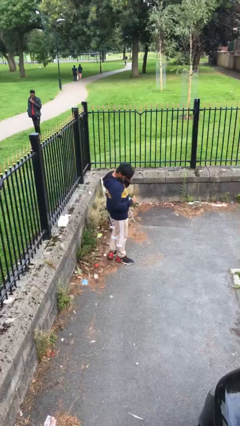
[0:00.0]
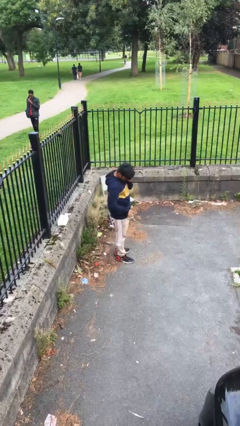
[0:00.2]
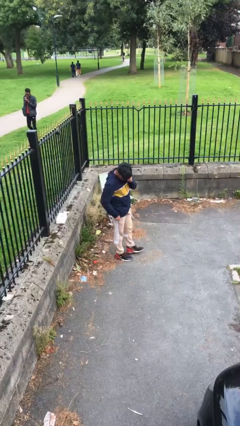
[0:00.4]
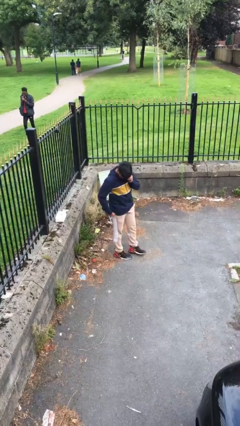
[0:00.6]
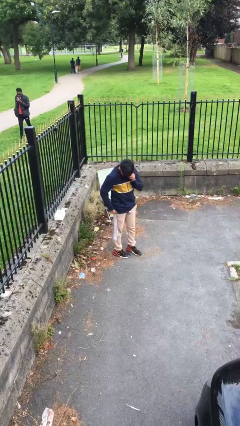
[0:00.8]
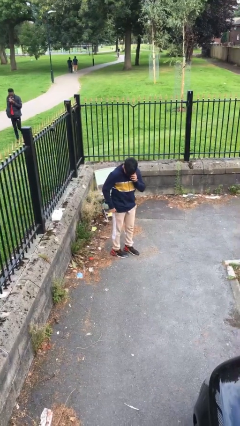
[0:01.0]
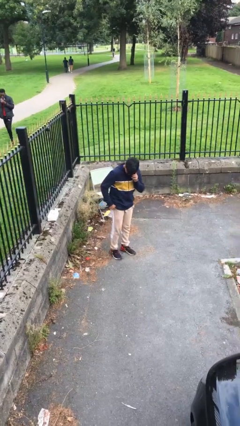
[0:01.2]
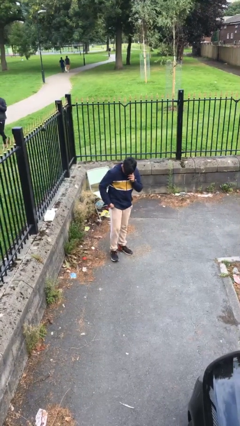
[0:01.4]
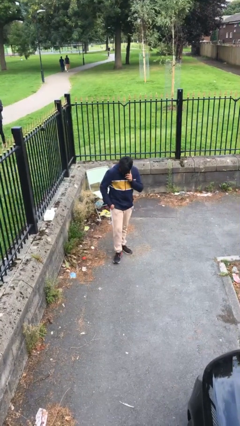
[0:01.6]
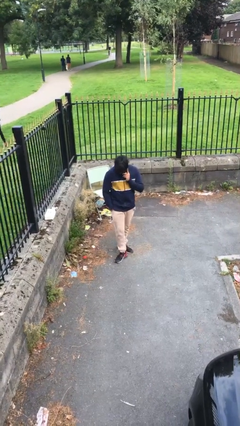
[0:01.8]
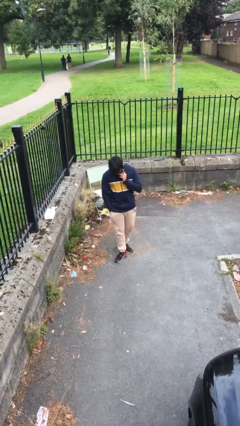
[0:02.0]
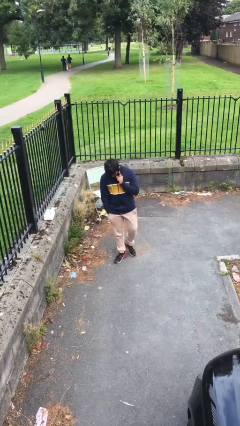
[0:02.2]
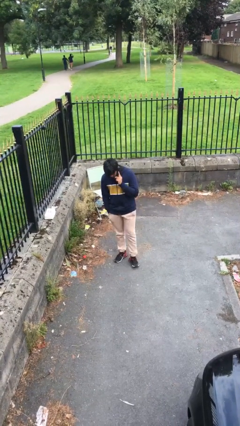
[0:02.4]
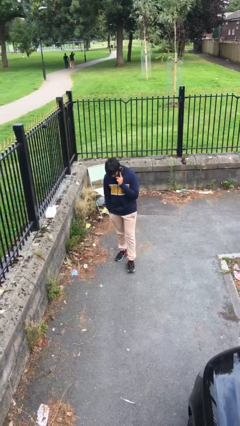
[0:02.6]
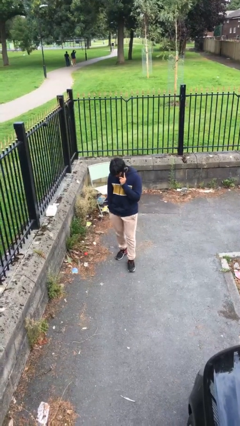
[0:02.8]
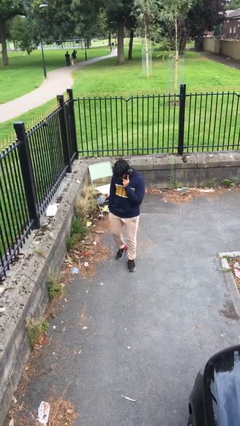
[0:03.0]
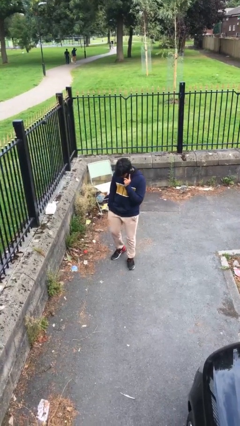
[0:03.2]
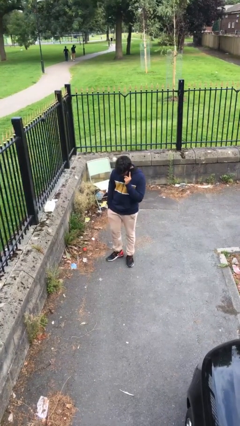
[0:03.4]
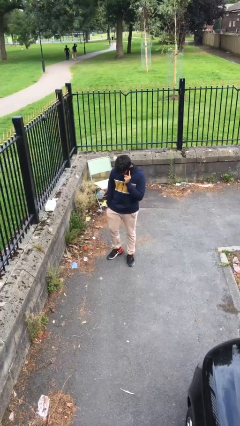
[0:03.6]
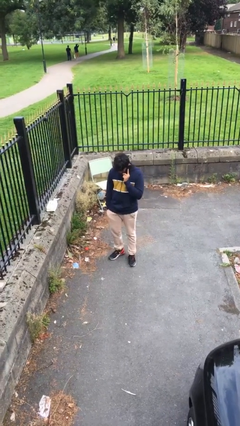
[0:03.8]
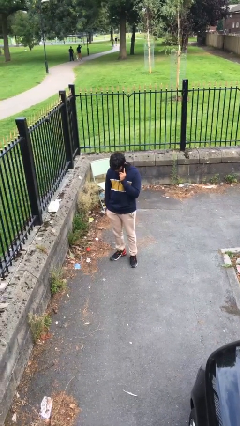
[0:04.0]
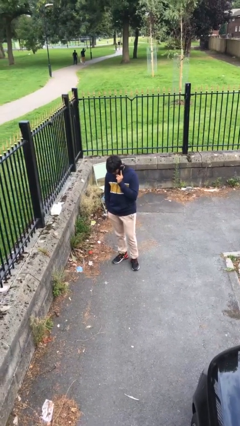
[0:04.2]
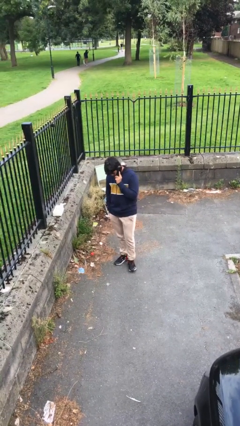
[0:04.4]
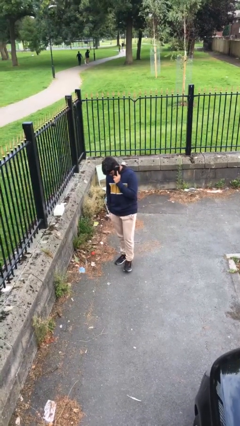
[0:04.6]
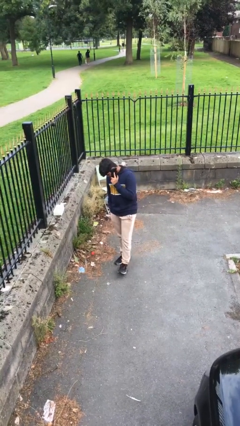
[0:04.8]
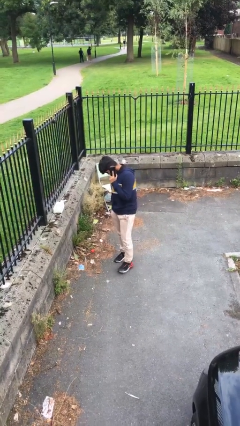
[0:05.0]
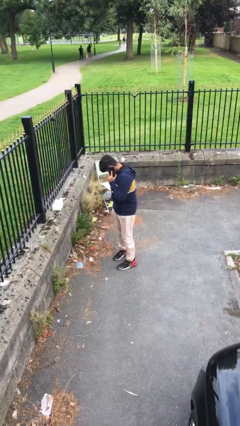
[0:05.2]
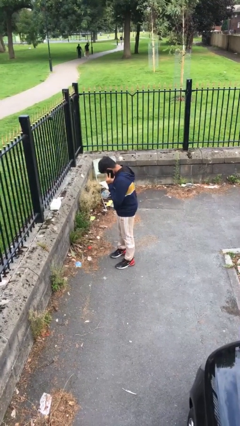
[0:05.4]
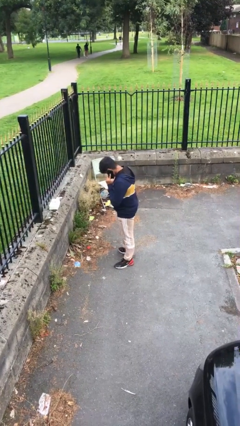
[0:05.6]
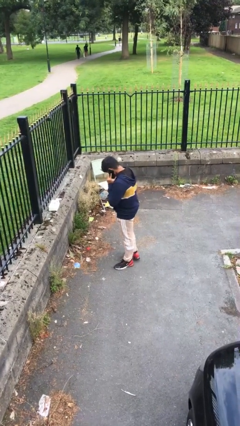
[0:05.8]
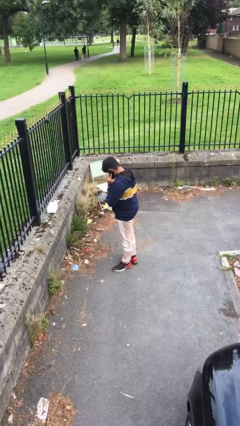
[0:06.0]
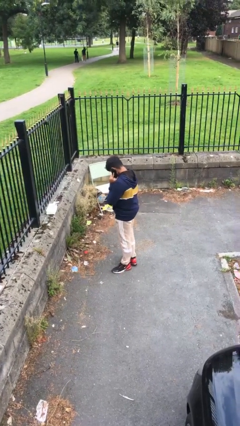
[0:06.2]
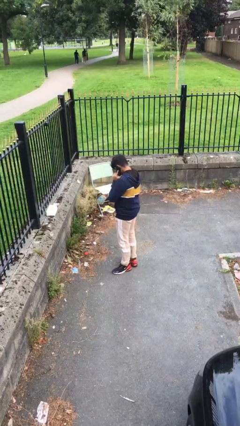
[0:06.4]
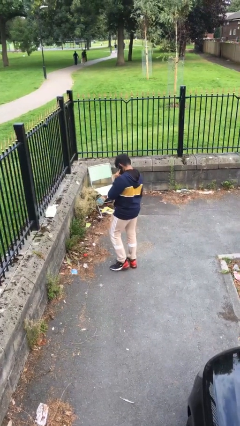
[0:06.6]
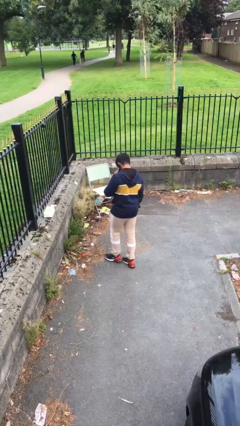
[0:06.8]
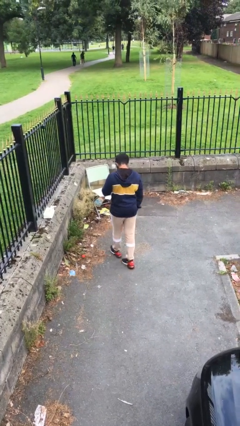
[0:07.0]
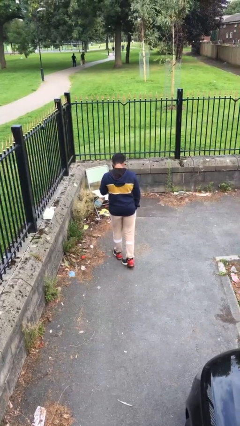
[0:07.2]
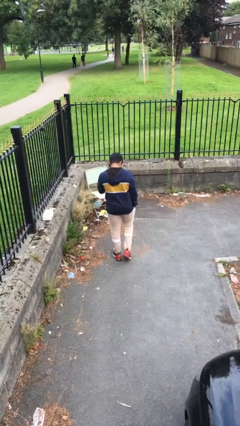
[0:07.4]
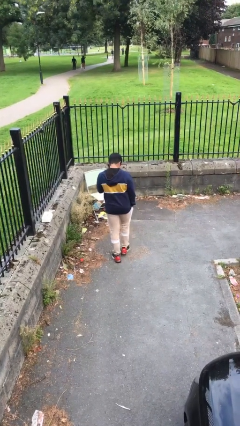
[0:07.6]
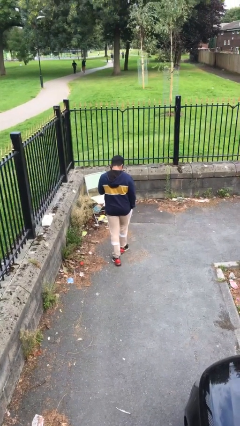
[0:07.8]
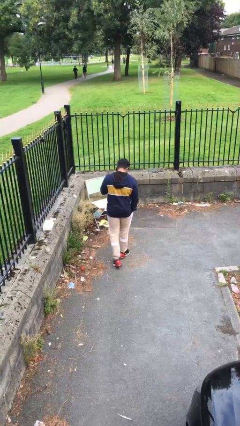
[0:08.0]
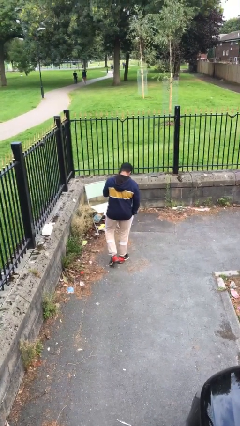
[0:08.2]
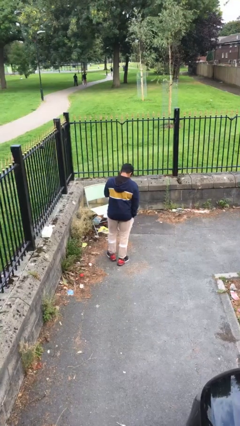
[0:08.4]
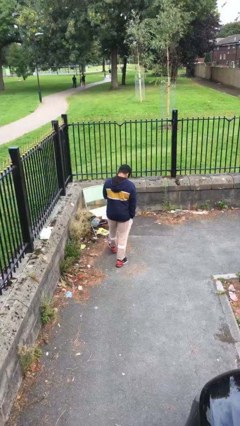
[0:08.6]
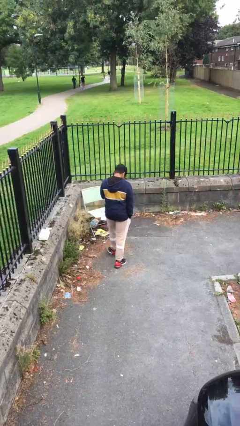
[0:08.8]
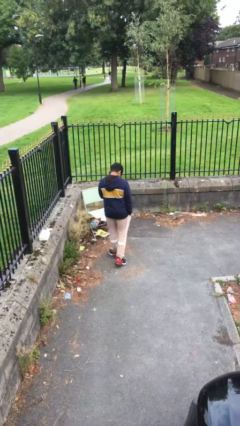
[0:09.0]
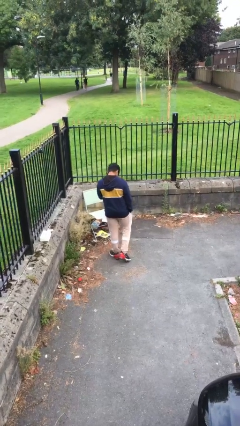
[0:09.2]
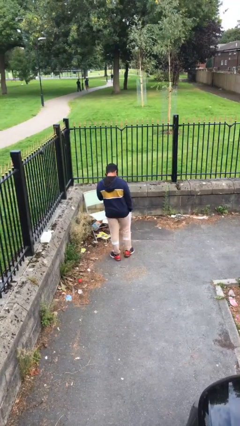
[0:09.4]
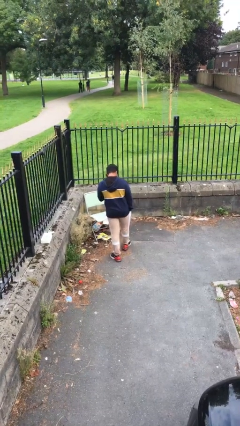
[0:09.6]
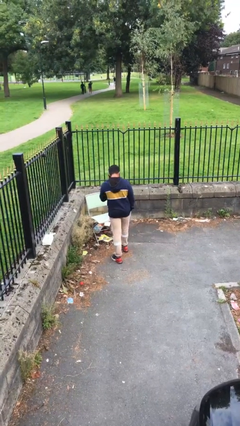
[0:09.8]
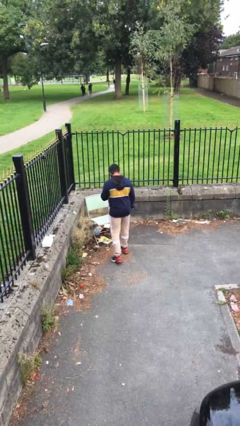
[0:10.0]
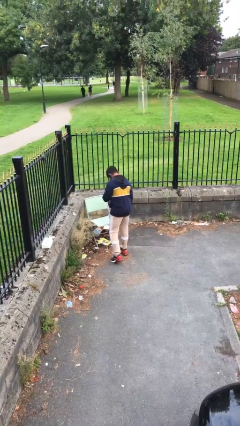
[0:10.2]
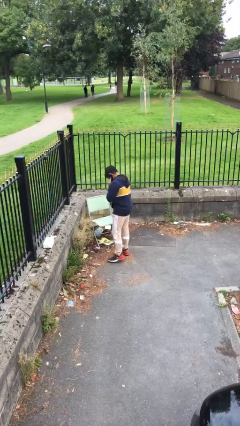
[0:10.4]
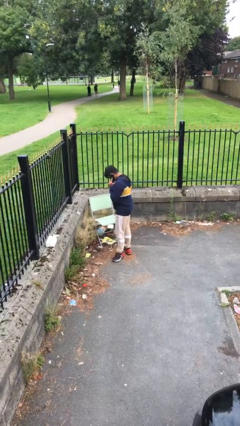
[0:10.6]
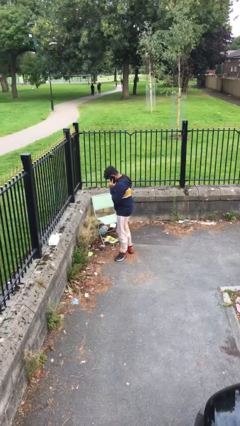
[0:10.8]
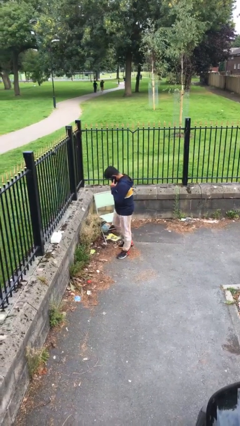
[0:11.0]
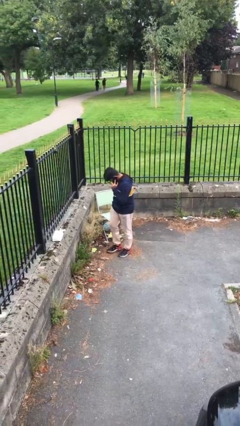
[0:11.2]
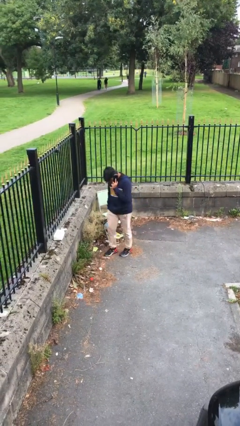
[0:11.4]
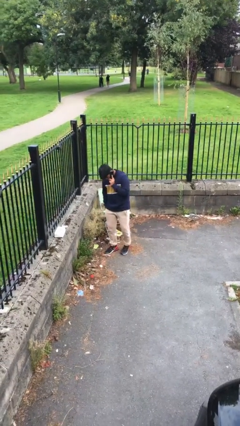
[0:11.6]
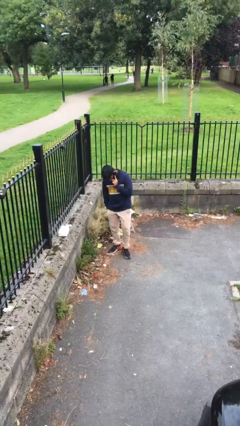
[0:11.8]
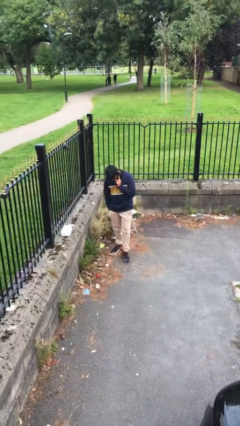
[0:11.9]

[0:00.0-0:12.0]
person talks on phone

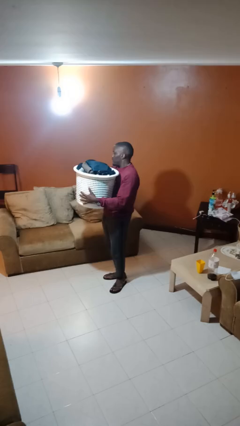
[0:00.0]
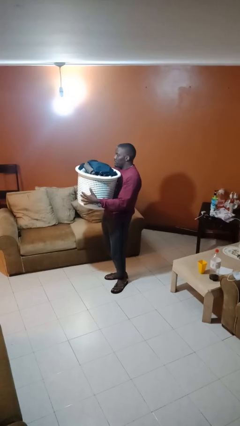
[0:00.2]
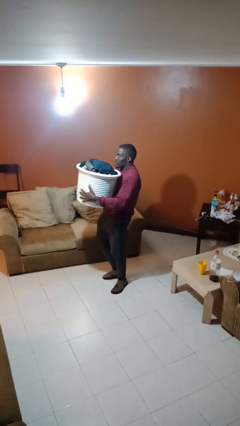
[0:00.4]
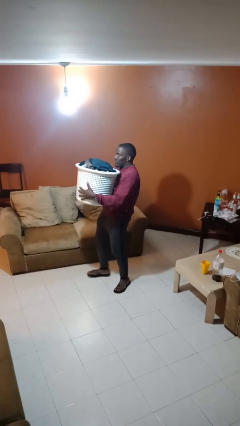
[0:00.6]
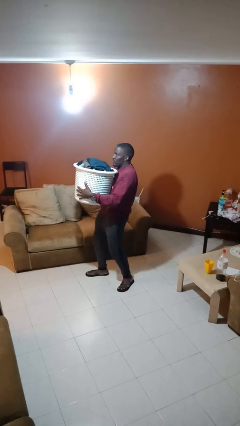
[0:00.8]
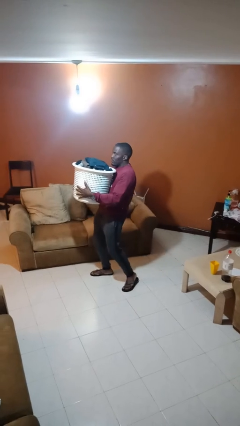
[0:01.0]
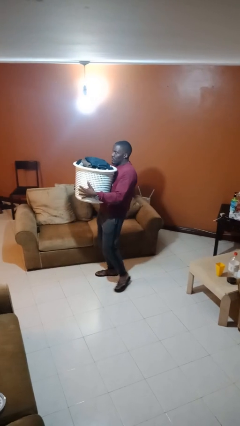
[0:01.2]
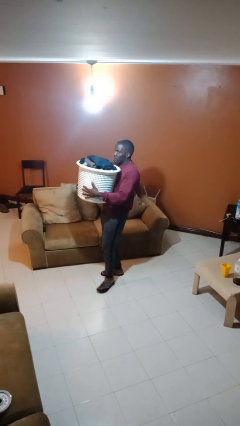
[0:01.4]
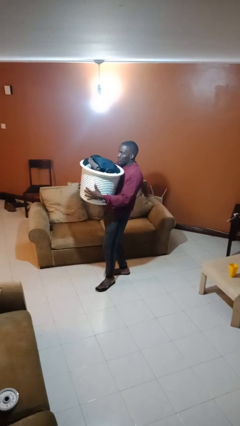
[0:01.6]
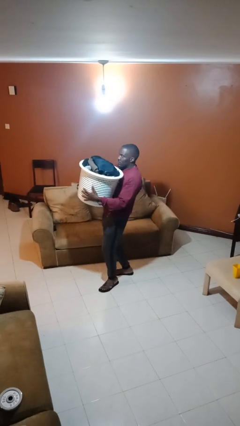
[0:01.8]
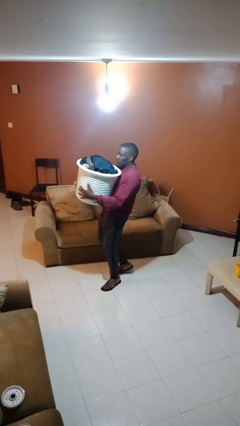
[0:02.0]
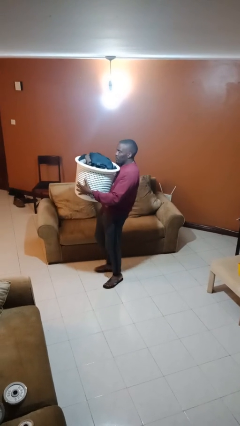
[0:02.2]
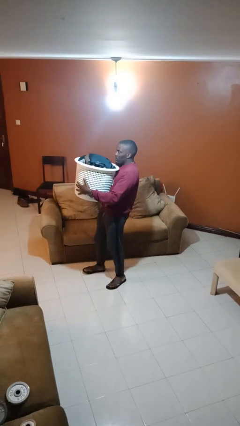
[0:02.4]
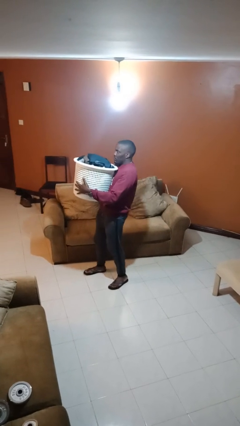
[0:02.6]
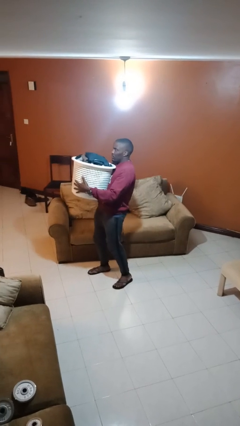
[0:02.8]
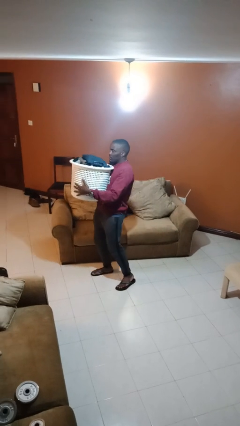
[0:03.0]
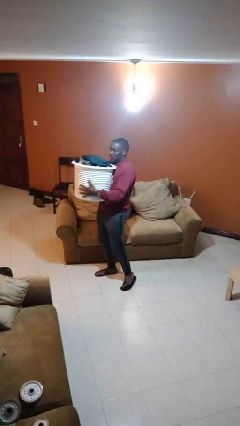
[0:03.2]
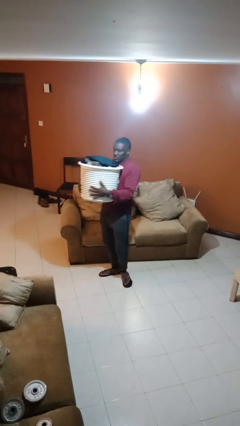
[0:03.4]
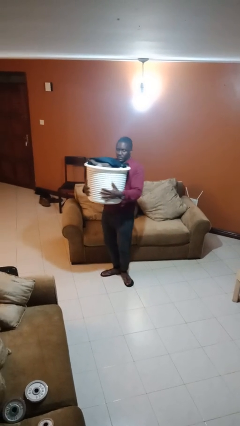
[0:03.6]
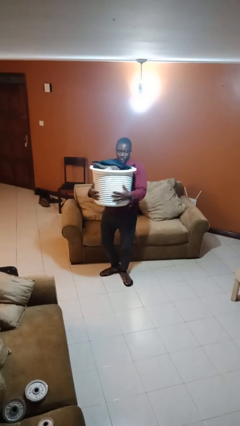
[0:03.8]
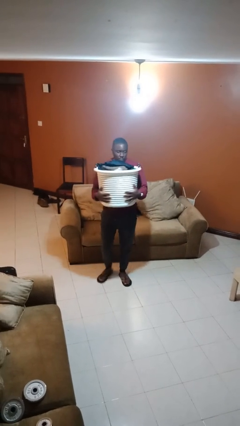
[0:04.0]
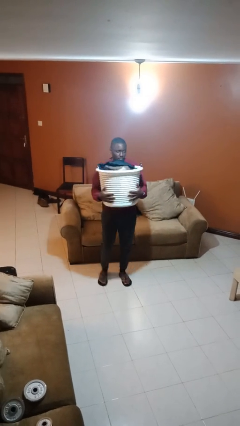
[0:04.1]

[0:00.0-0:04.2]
person carries laundry basket

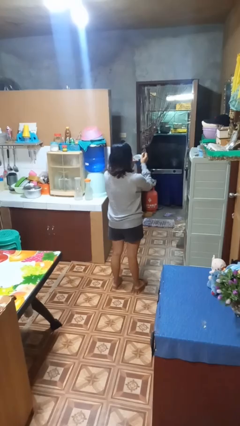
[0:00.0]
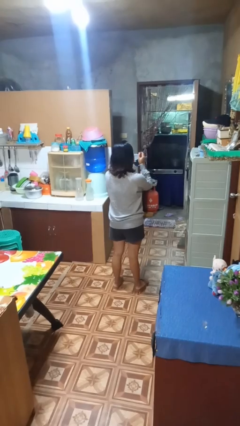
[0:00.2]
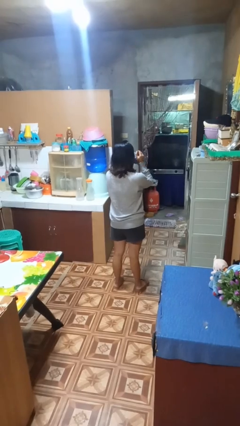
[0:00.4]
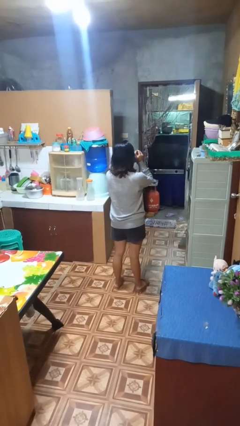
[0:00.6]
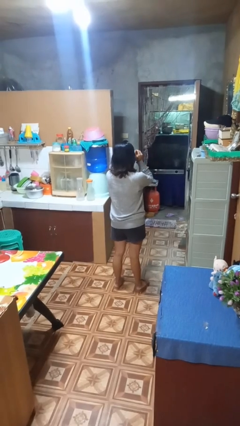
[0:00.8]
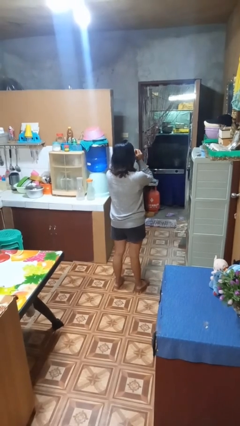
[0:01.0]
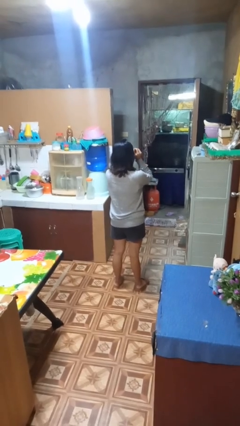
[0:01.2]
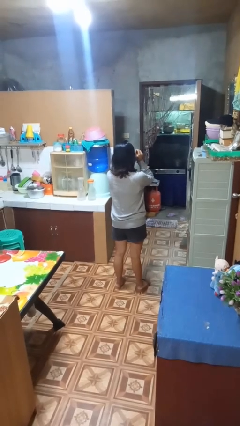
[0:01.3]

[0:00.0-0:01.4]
person drinks from mug

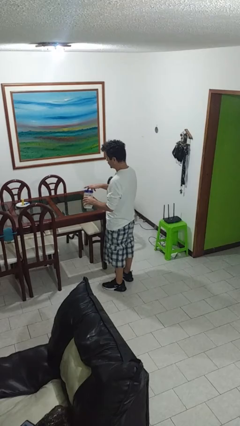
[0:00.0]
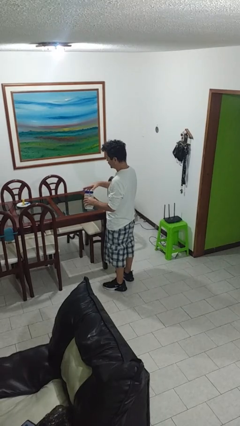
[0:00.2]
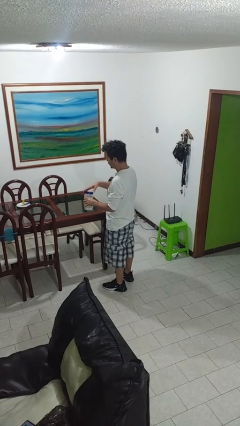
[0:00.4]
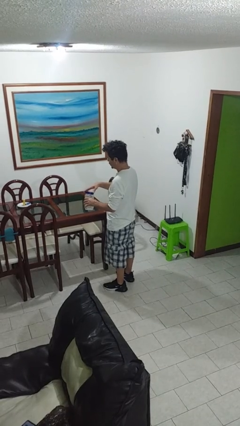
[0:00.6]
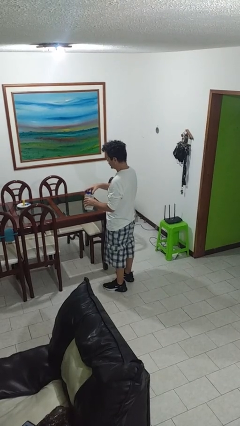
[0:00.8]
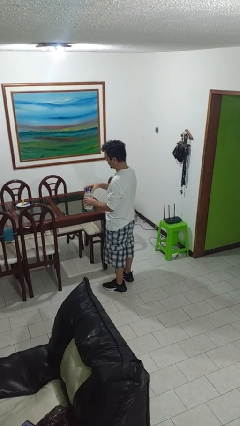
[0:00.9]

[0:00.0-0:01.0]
person opens jar
